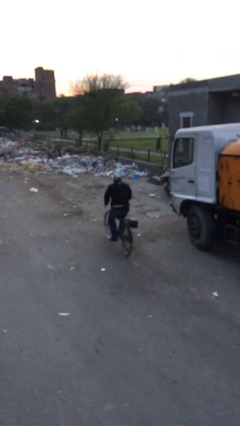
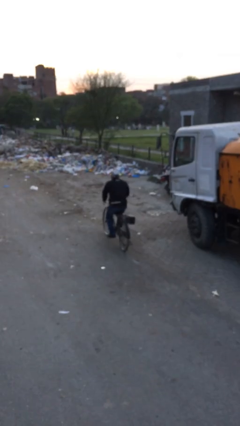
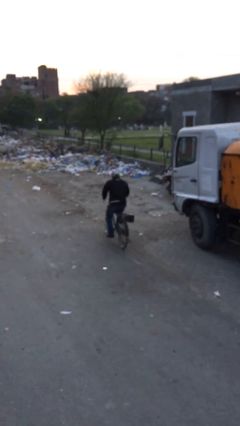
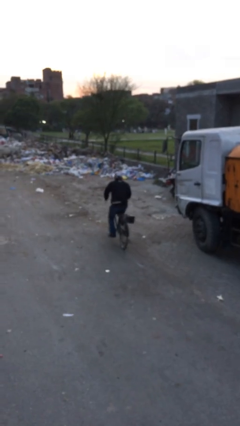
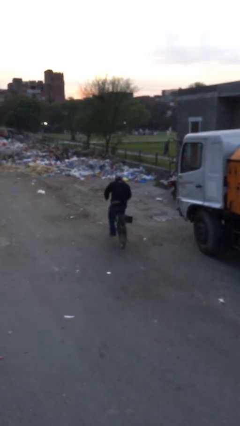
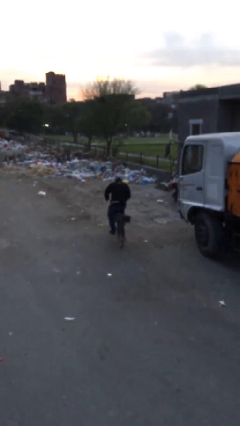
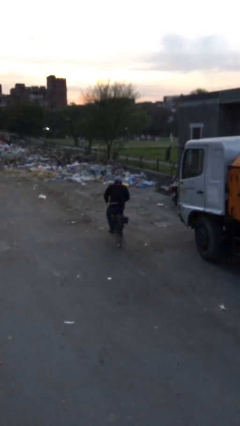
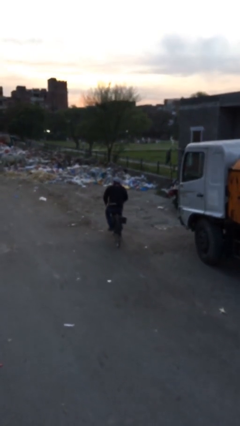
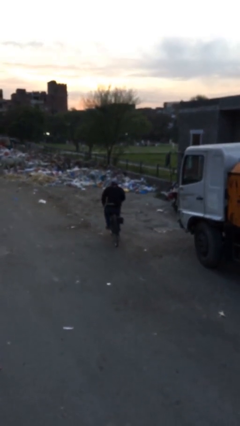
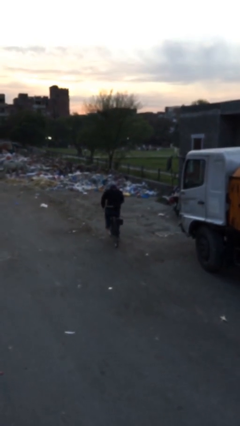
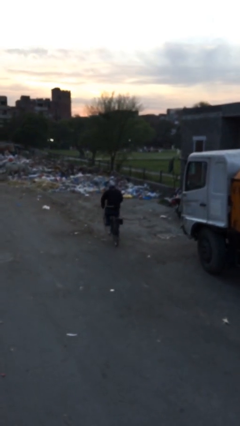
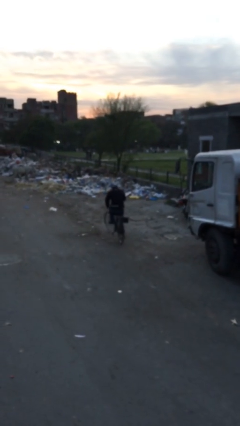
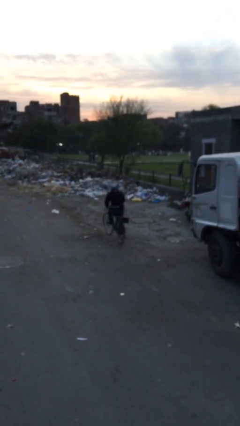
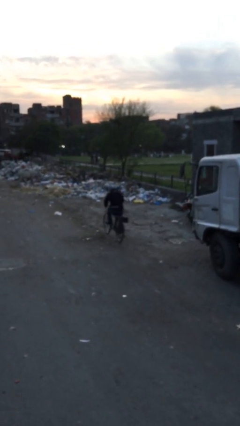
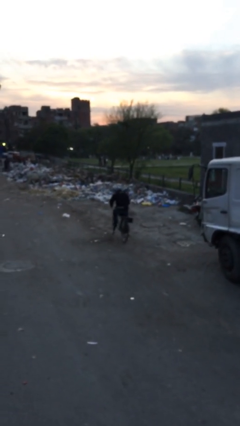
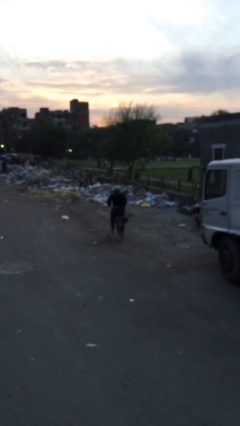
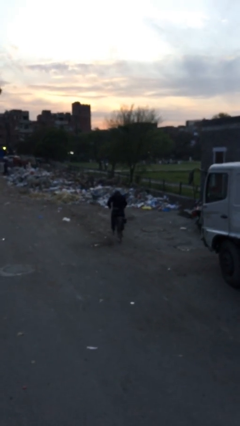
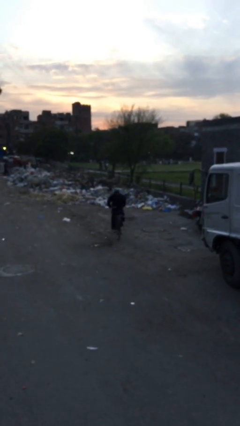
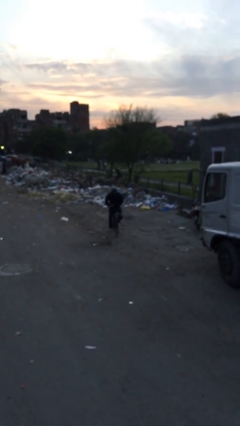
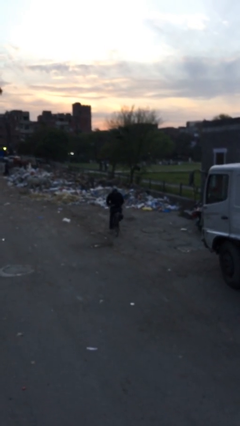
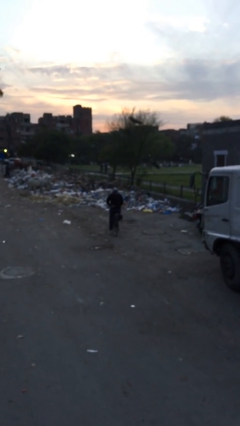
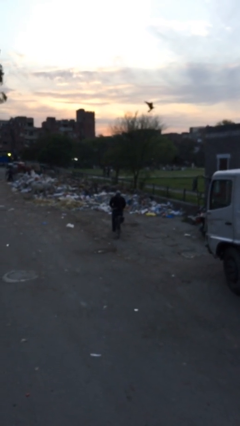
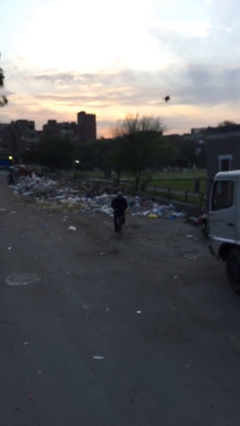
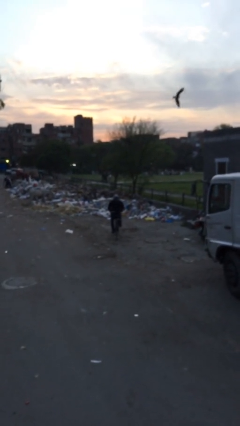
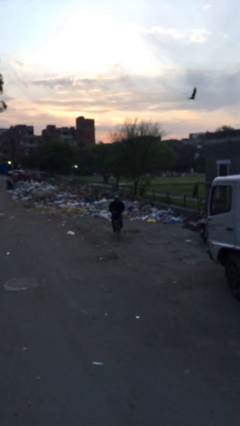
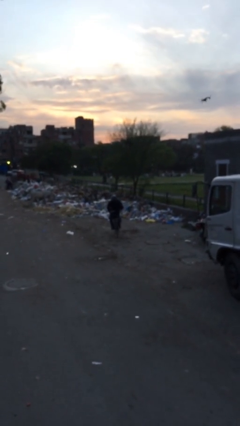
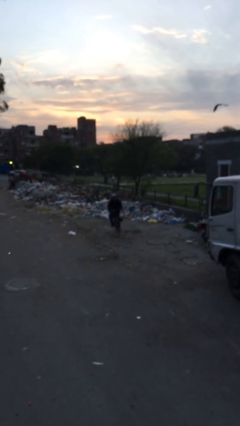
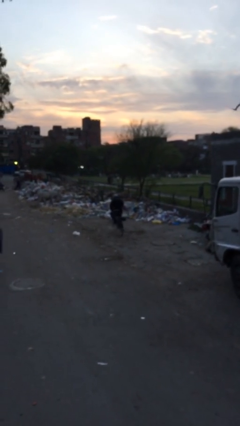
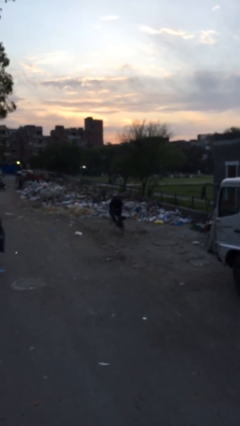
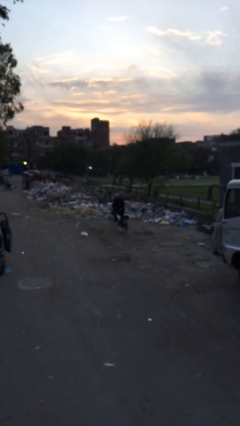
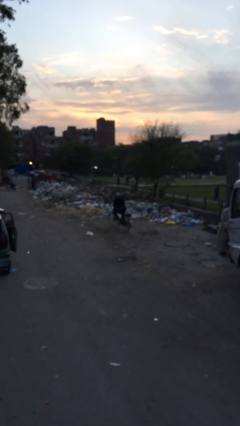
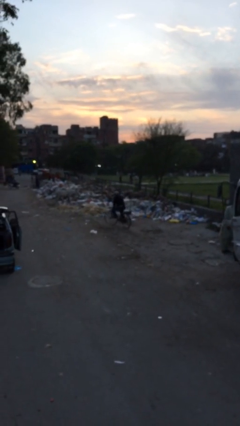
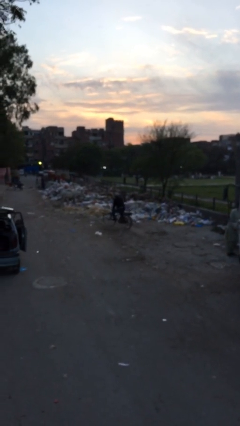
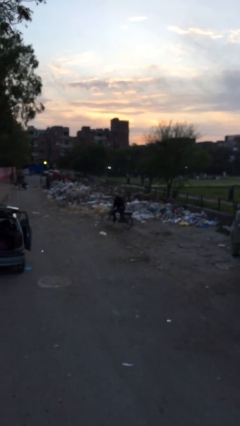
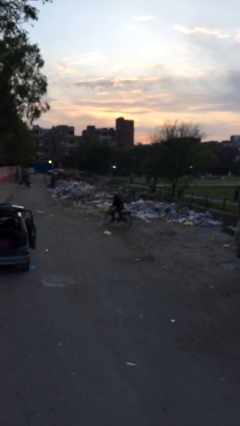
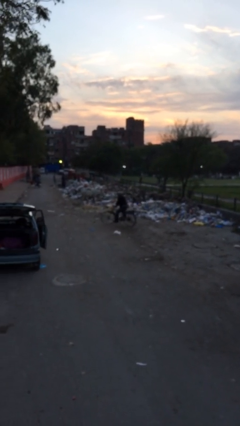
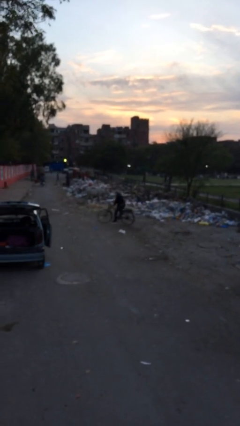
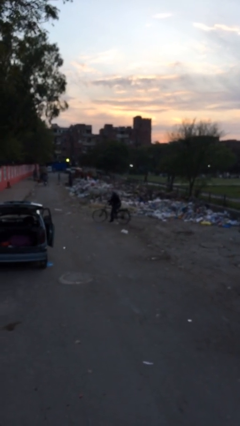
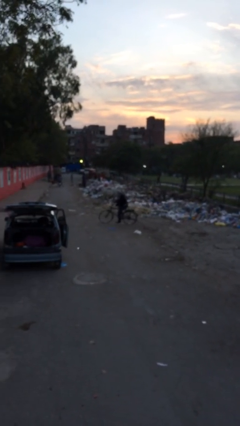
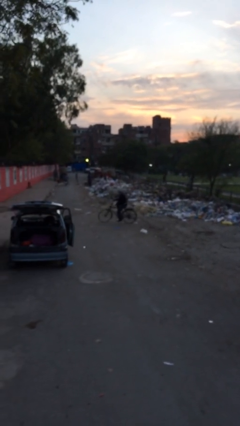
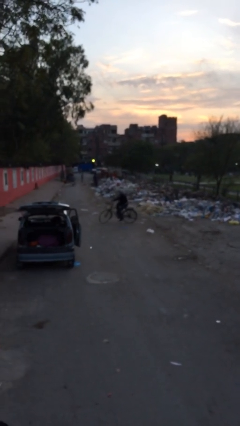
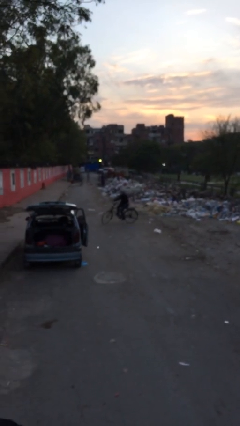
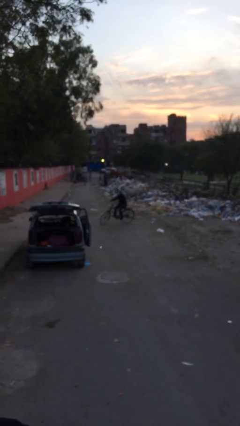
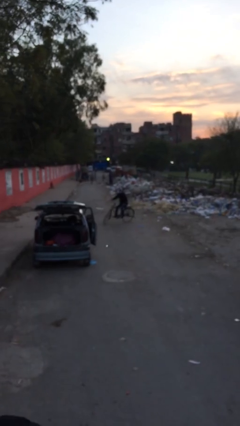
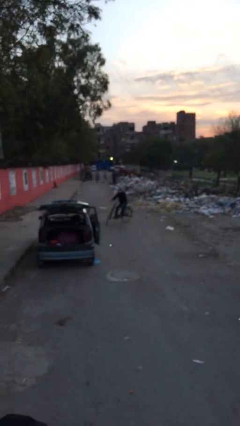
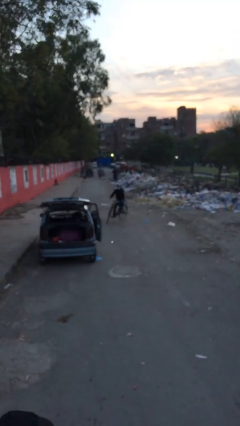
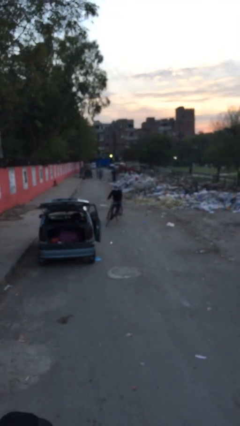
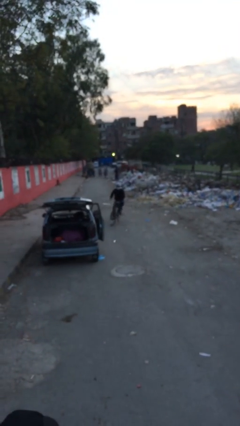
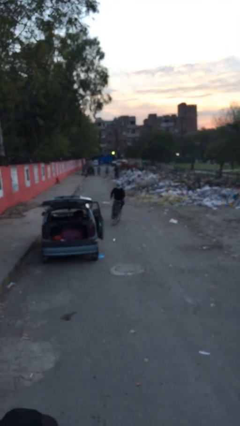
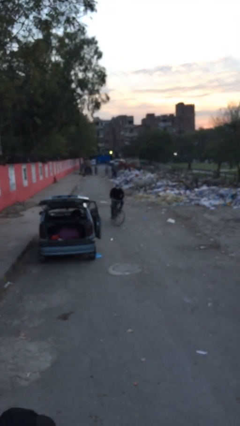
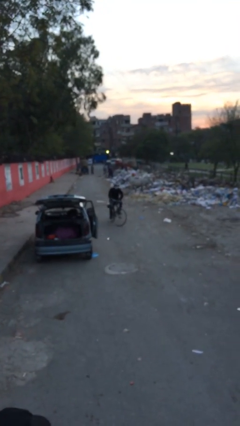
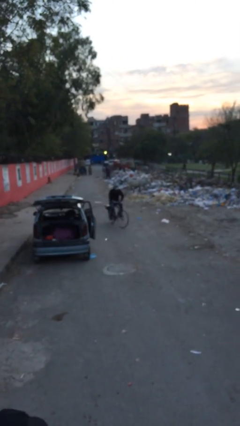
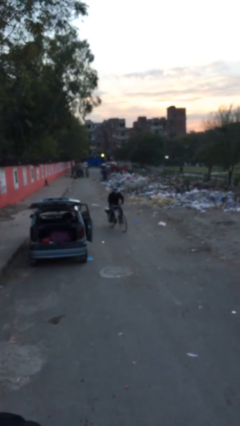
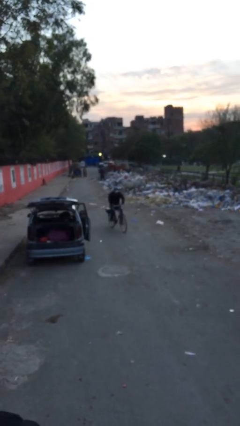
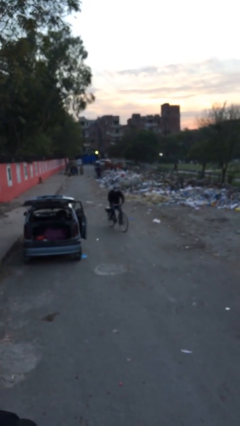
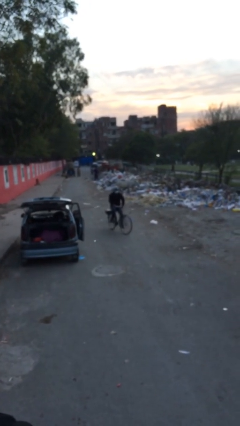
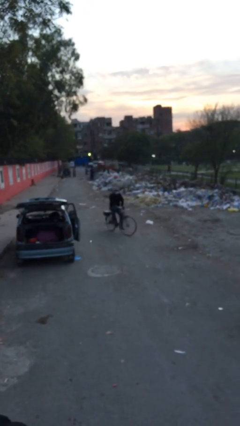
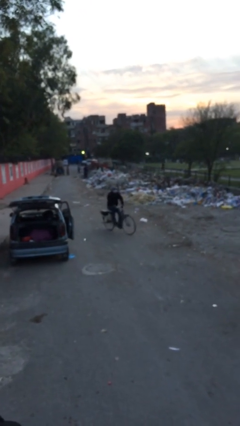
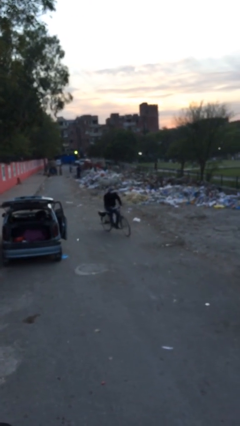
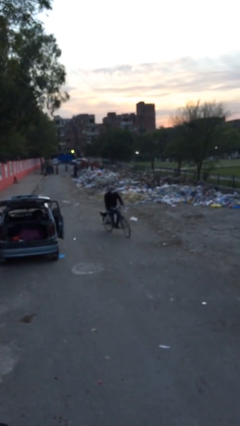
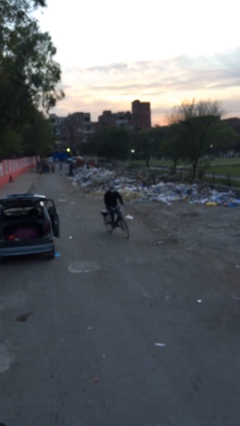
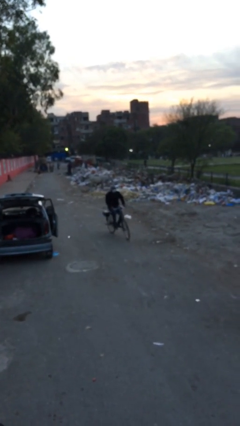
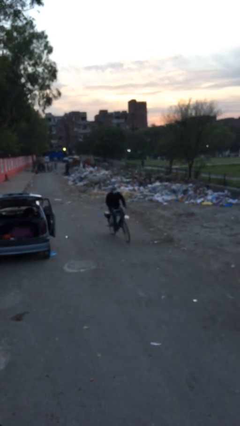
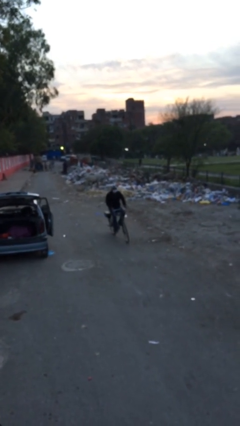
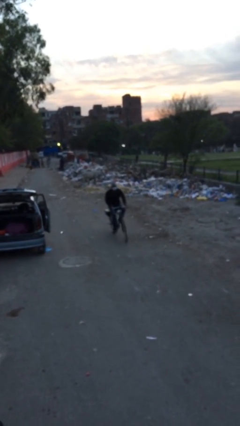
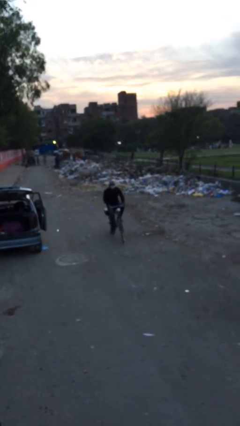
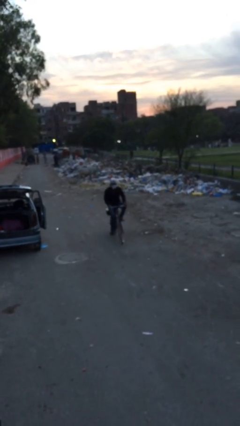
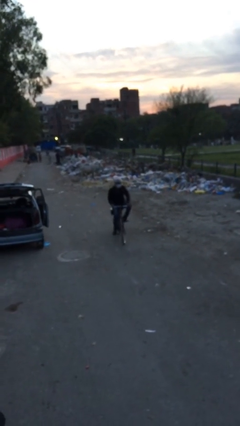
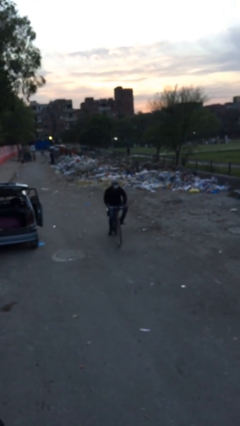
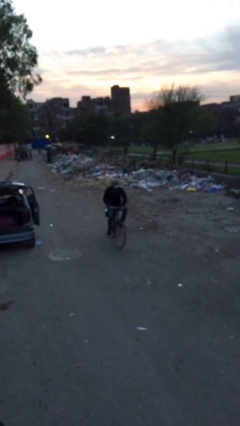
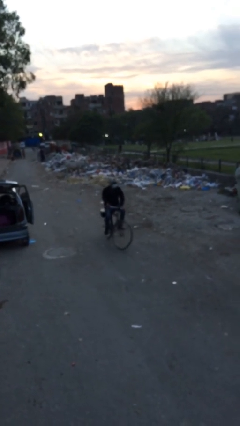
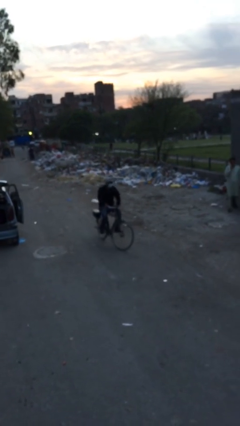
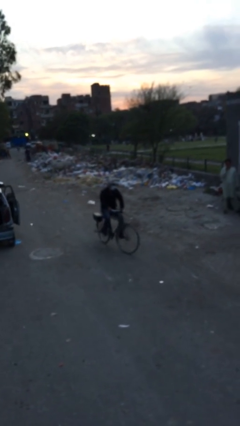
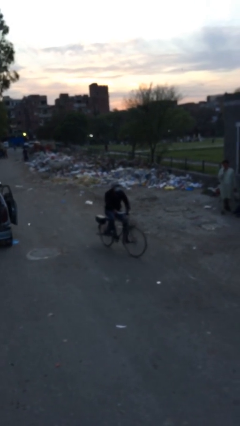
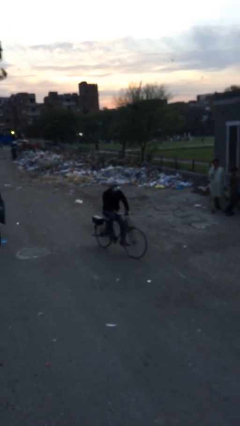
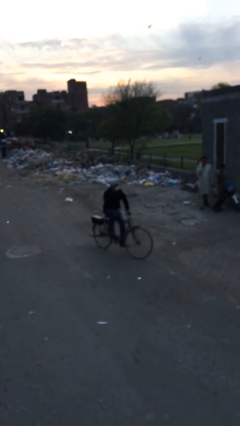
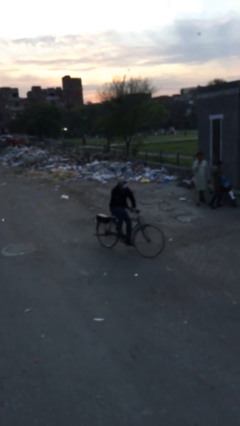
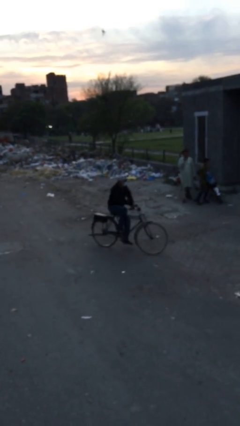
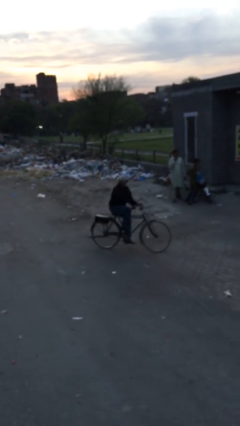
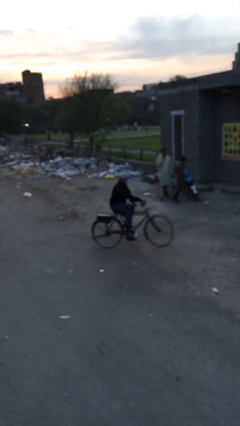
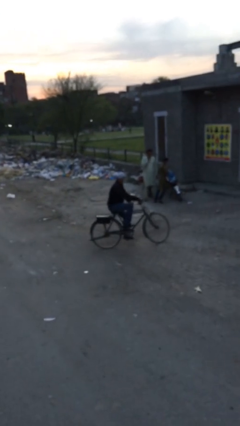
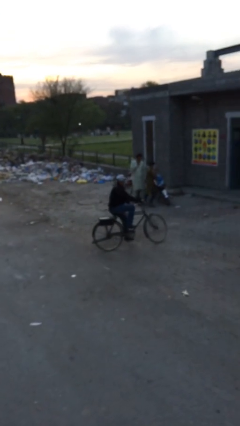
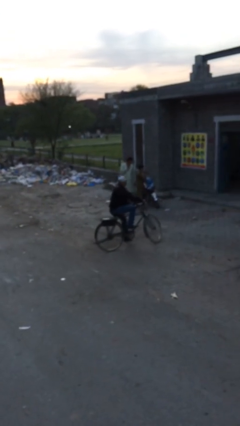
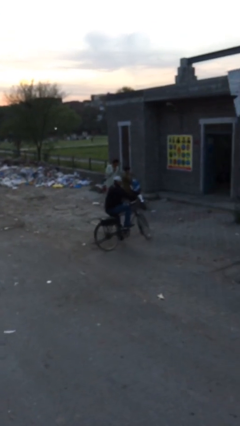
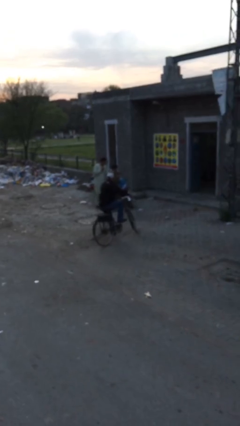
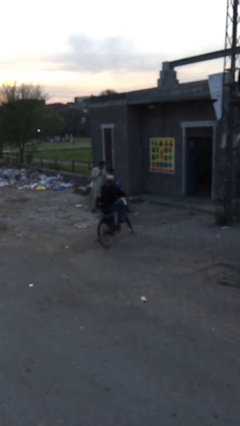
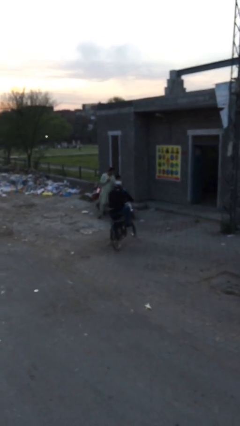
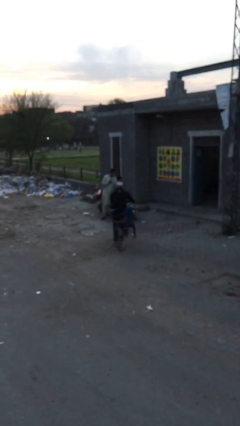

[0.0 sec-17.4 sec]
person rides bicycle

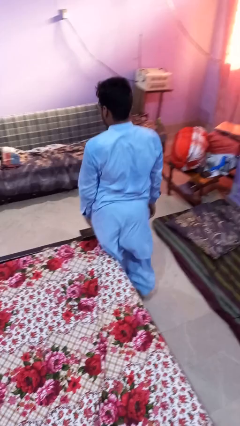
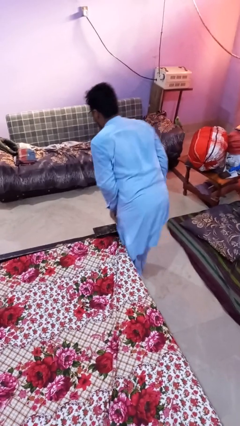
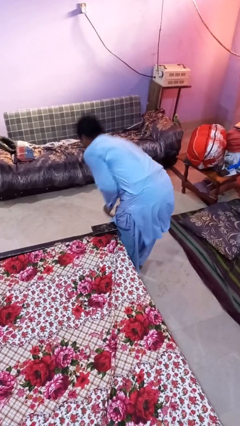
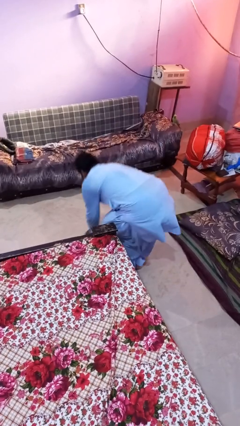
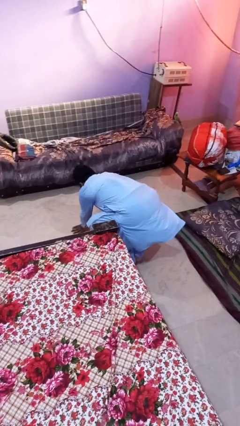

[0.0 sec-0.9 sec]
person trips on object on floor
